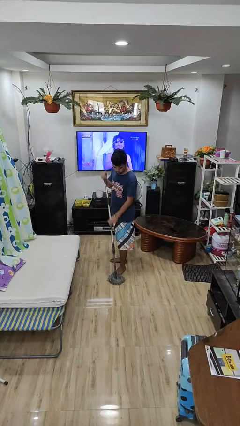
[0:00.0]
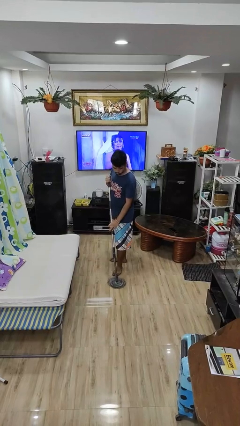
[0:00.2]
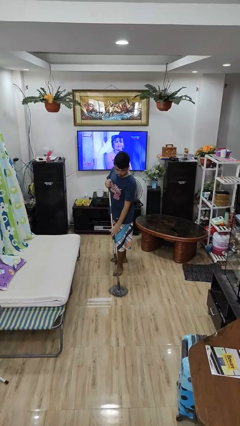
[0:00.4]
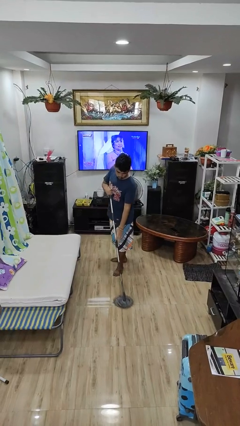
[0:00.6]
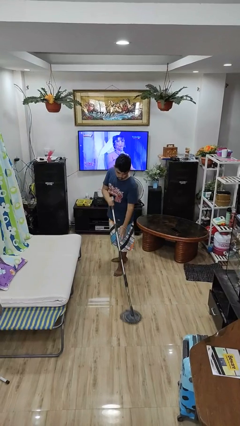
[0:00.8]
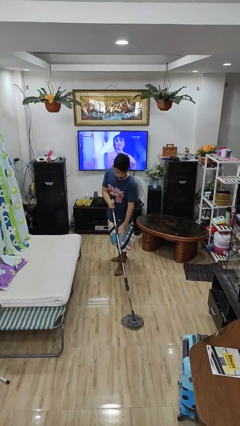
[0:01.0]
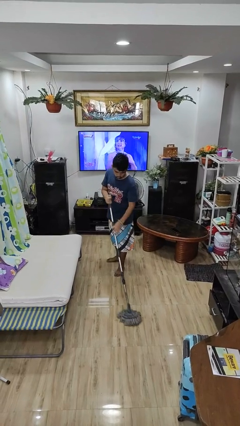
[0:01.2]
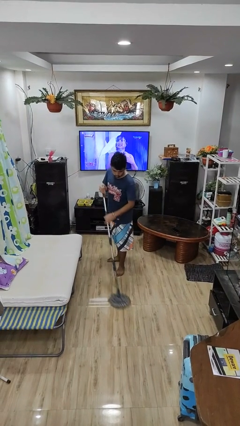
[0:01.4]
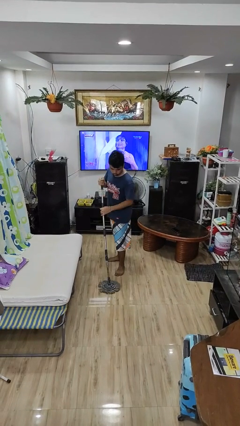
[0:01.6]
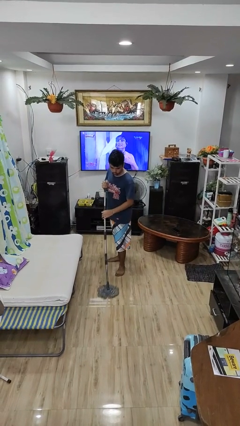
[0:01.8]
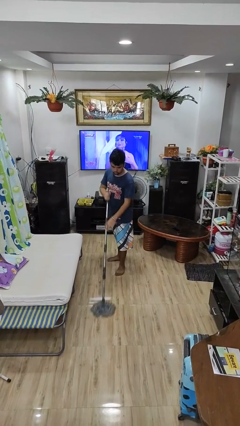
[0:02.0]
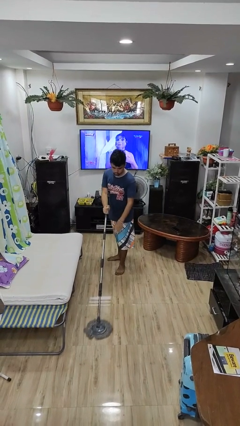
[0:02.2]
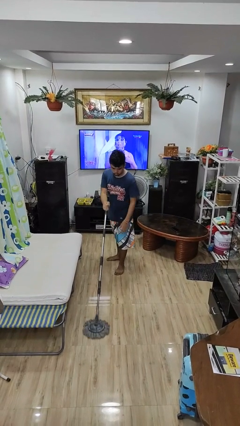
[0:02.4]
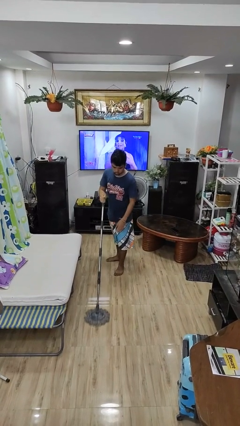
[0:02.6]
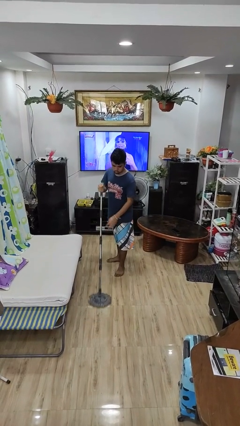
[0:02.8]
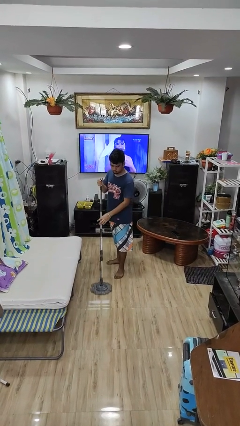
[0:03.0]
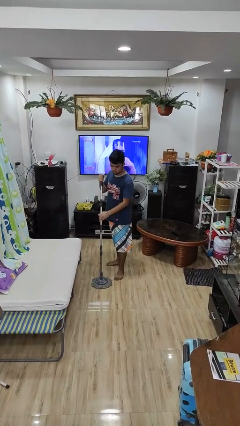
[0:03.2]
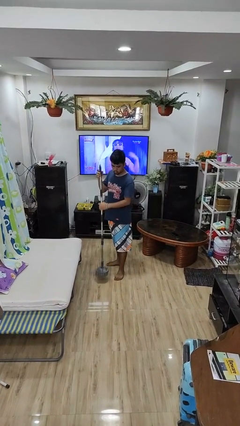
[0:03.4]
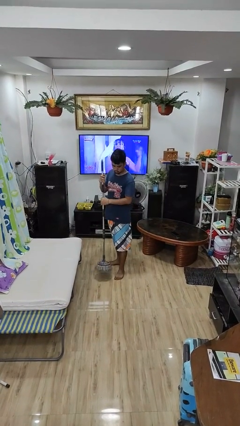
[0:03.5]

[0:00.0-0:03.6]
person mops

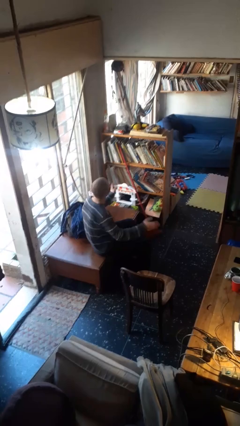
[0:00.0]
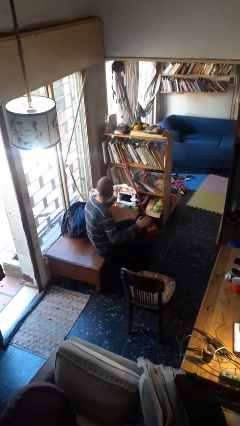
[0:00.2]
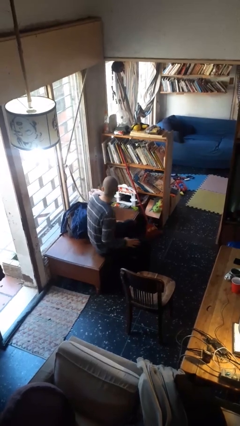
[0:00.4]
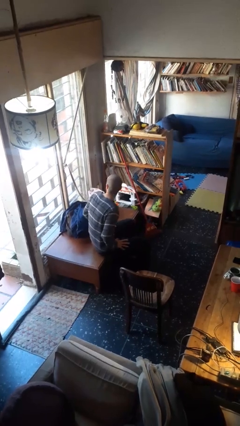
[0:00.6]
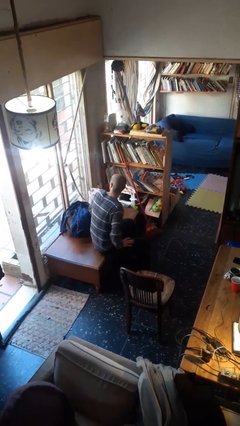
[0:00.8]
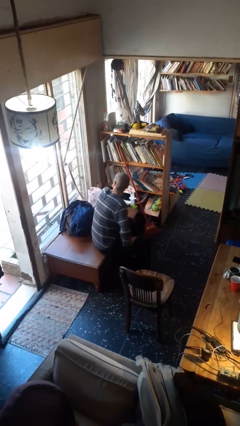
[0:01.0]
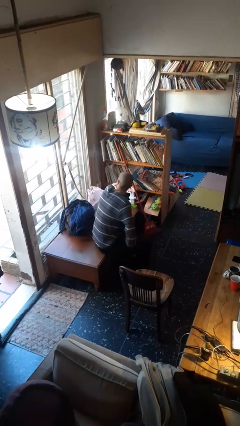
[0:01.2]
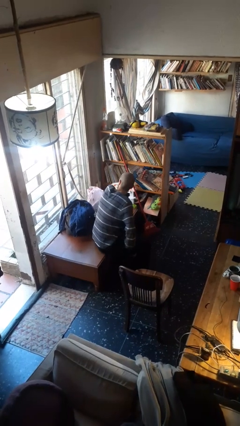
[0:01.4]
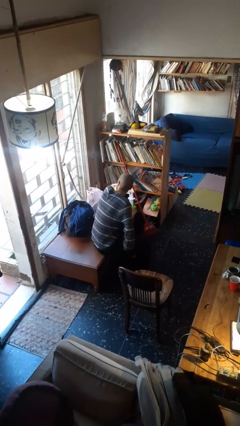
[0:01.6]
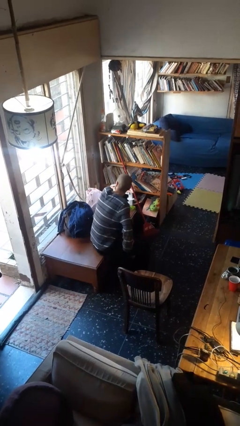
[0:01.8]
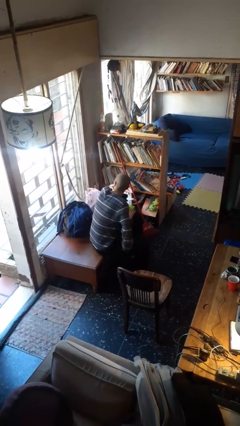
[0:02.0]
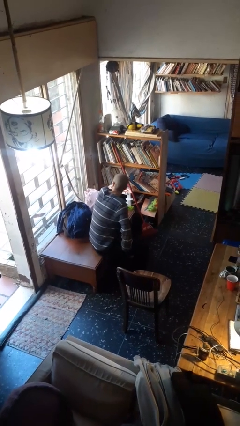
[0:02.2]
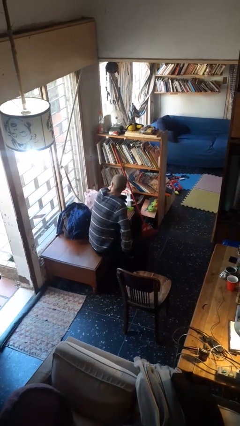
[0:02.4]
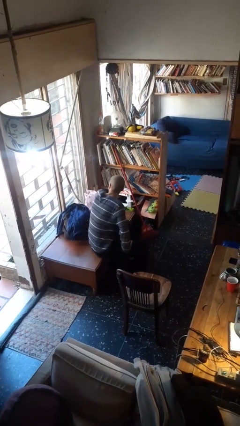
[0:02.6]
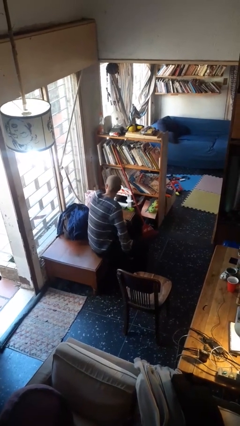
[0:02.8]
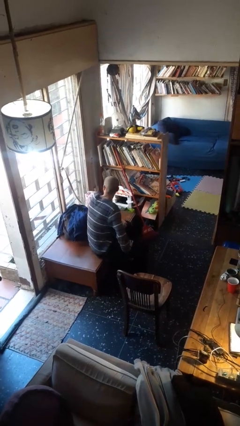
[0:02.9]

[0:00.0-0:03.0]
person slaps hands on thighs

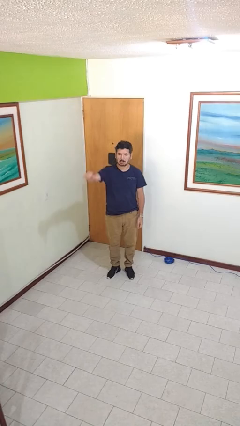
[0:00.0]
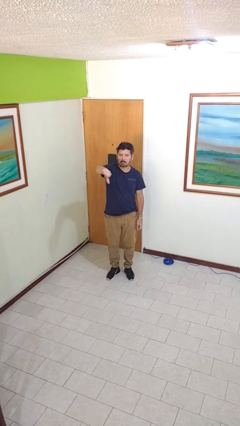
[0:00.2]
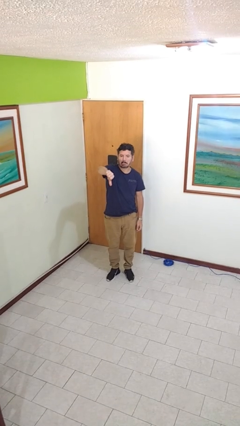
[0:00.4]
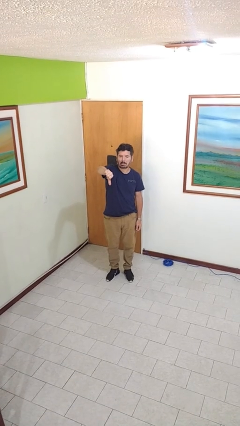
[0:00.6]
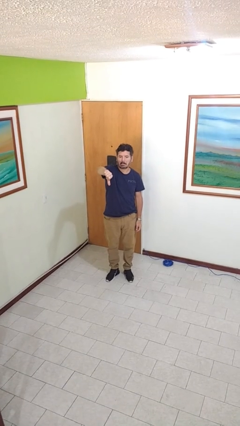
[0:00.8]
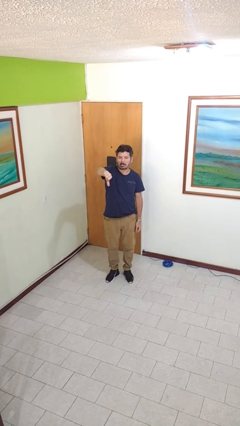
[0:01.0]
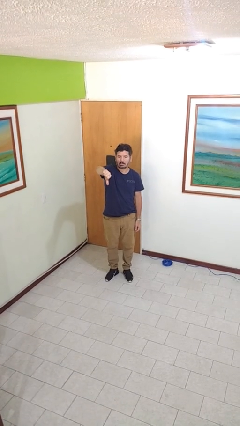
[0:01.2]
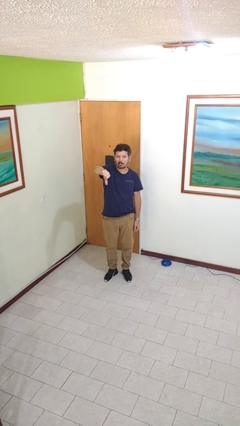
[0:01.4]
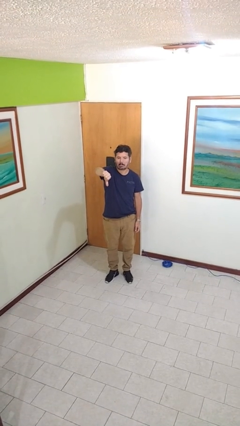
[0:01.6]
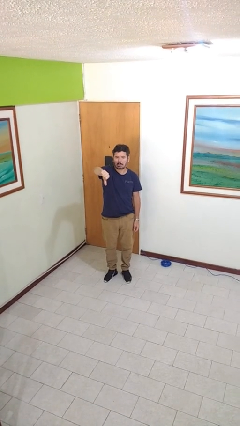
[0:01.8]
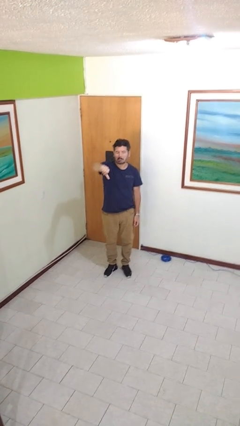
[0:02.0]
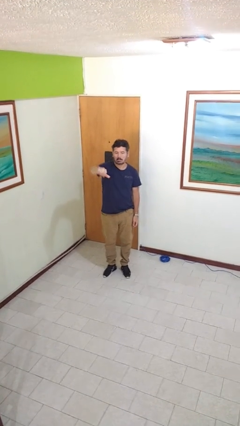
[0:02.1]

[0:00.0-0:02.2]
person gestures thumbs down

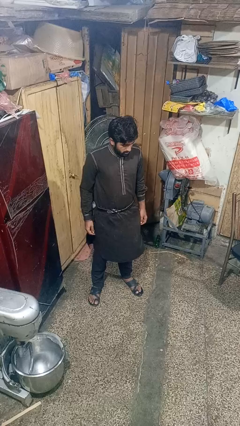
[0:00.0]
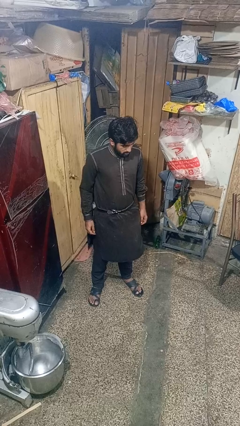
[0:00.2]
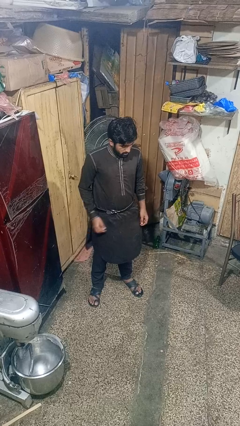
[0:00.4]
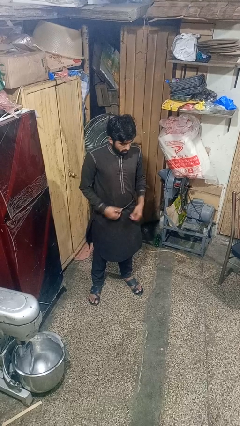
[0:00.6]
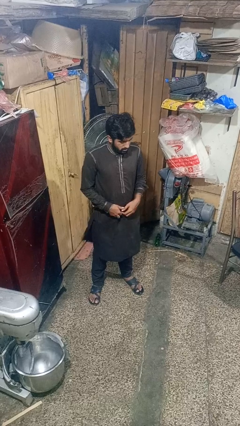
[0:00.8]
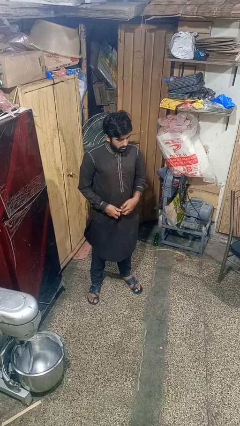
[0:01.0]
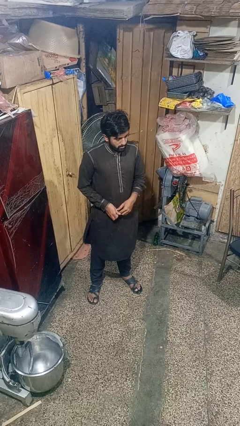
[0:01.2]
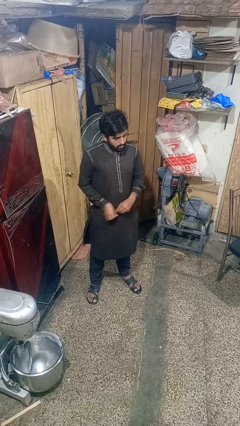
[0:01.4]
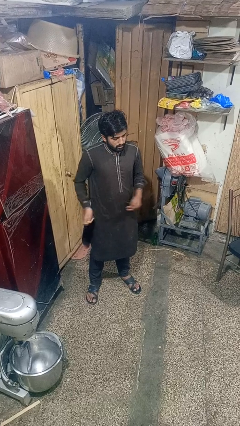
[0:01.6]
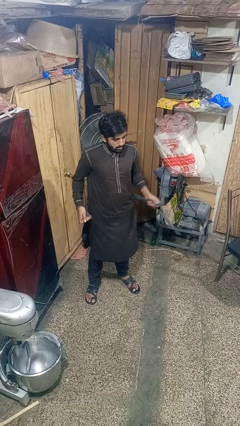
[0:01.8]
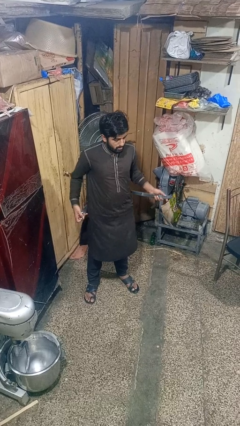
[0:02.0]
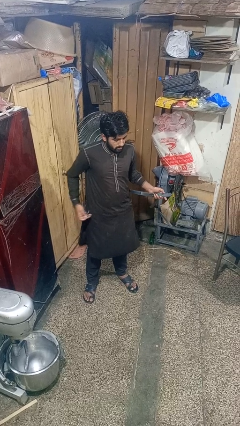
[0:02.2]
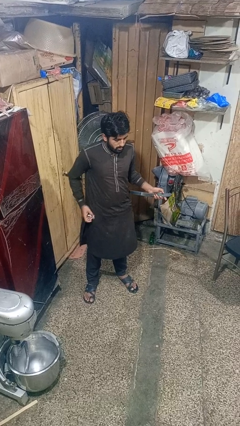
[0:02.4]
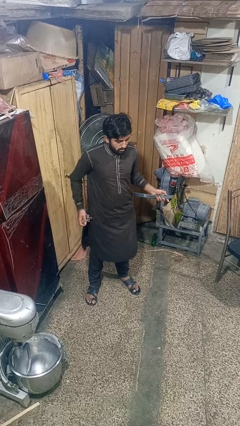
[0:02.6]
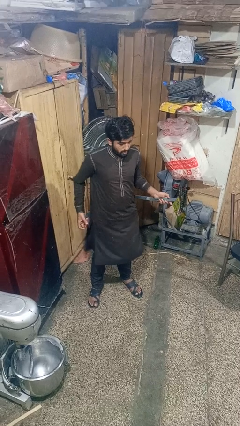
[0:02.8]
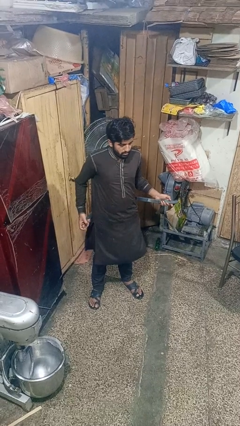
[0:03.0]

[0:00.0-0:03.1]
person takes off belt

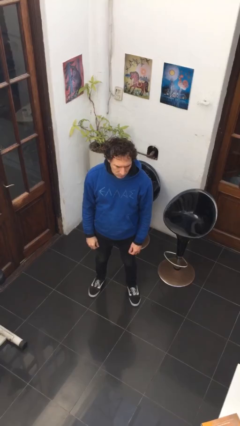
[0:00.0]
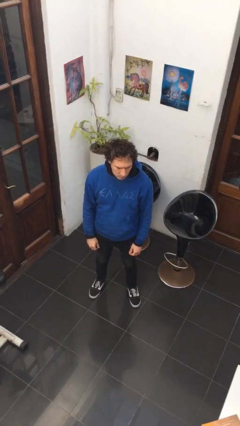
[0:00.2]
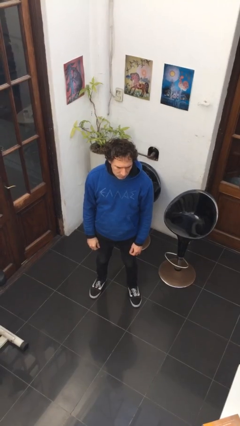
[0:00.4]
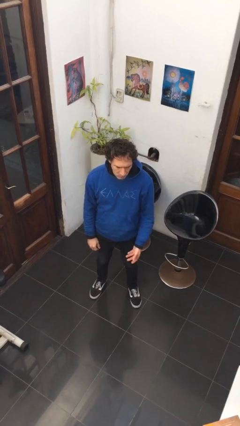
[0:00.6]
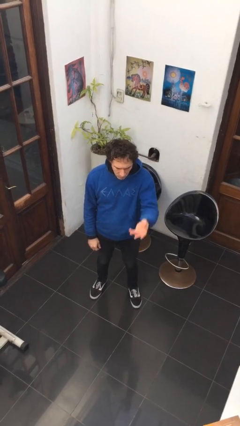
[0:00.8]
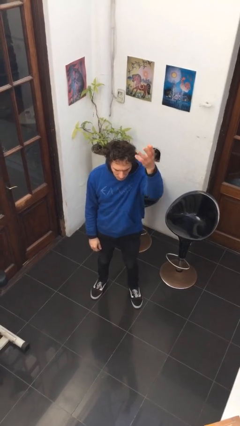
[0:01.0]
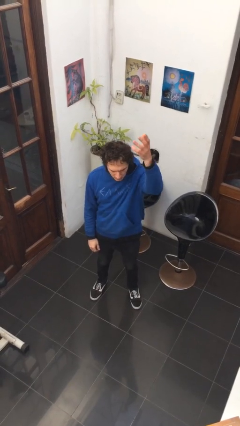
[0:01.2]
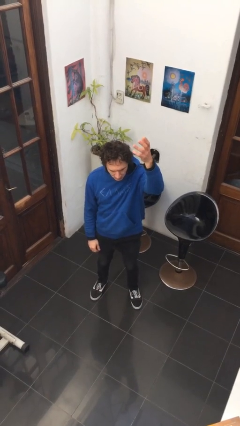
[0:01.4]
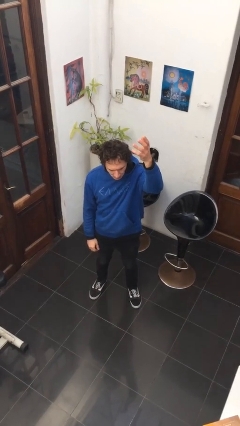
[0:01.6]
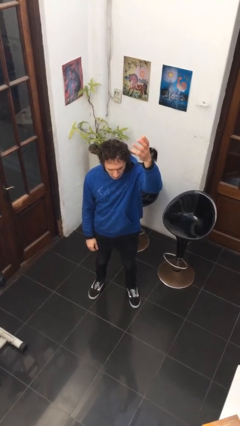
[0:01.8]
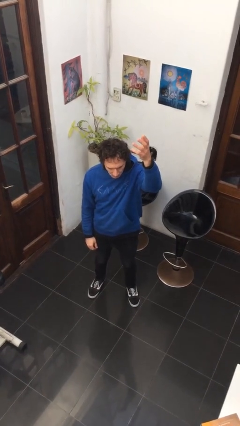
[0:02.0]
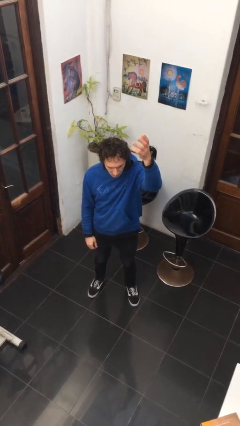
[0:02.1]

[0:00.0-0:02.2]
person gestures swipe up

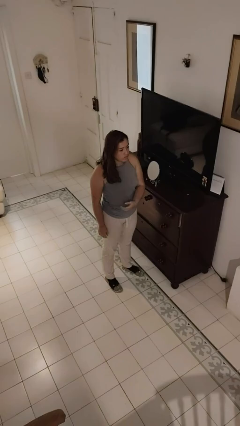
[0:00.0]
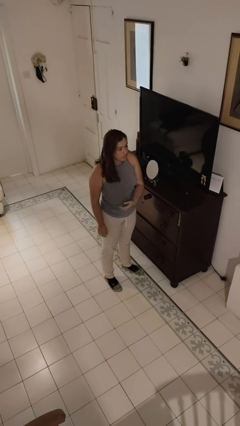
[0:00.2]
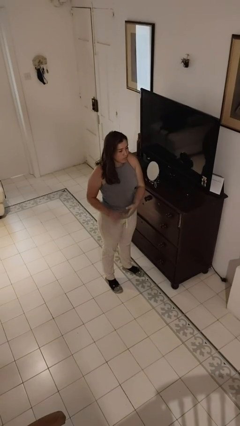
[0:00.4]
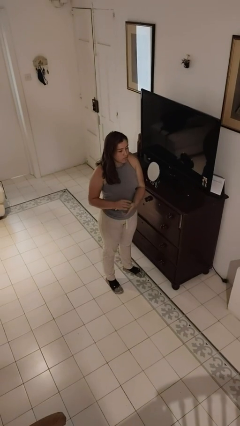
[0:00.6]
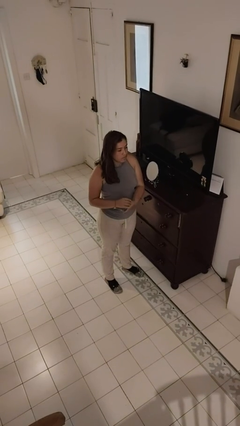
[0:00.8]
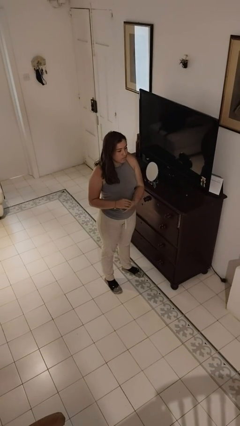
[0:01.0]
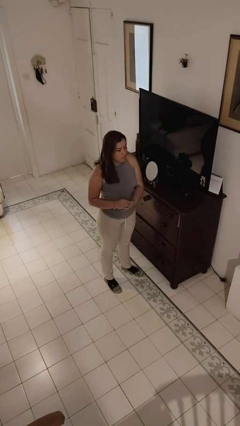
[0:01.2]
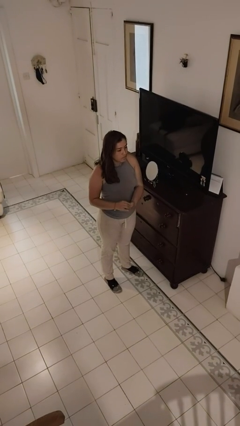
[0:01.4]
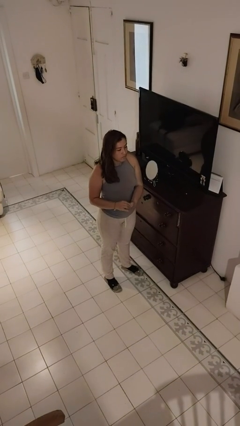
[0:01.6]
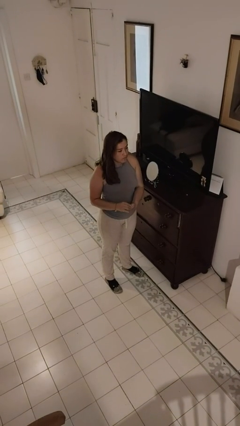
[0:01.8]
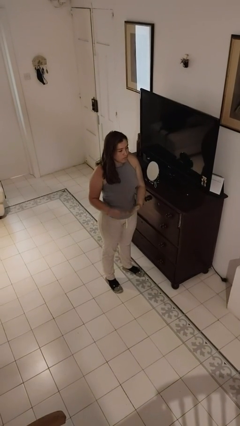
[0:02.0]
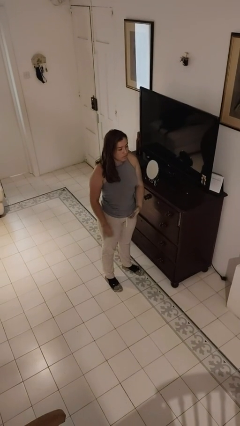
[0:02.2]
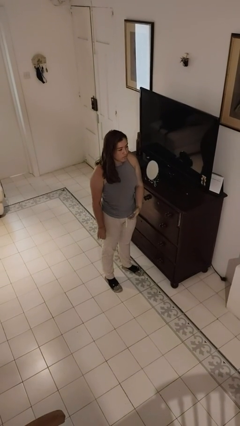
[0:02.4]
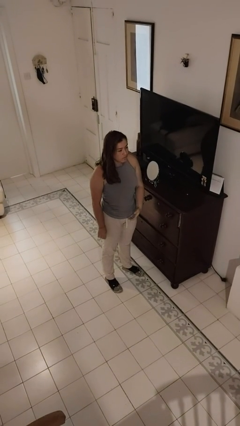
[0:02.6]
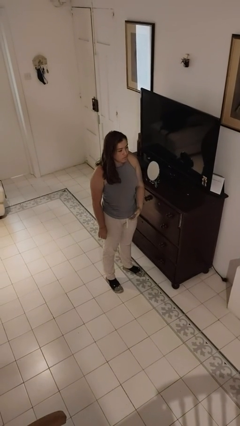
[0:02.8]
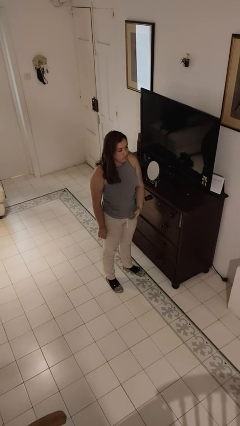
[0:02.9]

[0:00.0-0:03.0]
person takes off ring

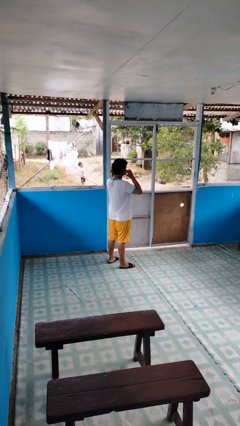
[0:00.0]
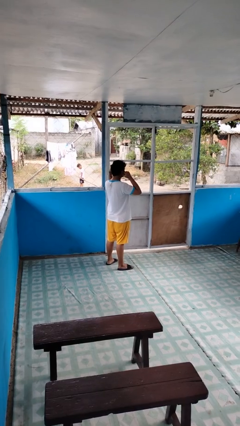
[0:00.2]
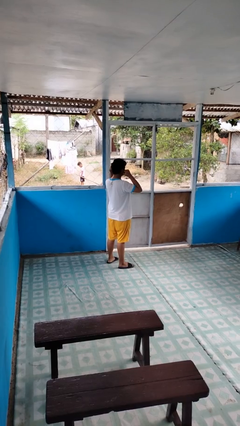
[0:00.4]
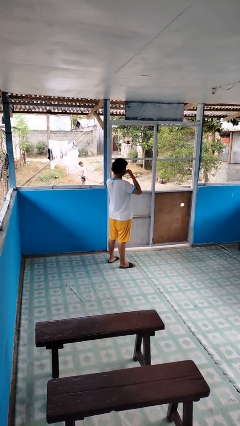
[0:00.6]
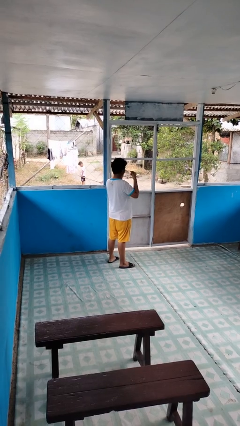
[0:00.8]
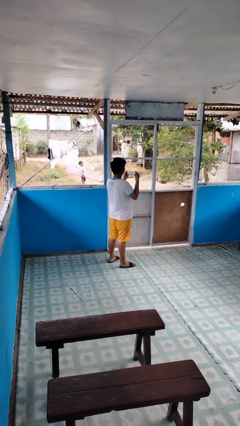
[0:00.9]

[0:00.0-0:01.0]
person takes off facemask
